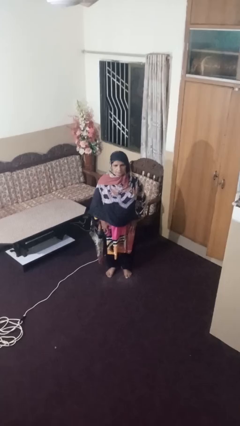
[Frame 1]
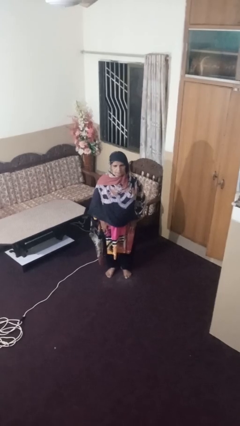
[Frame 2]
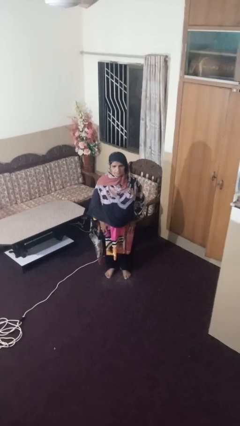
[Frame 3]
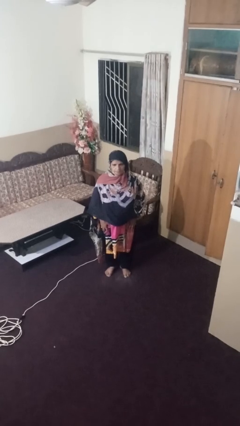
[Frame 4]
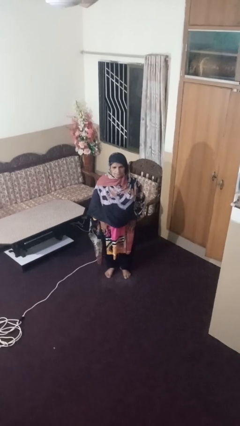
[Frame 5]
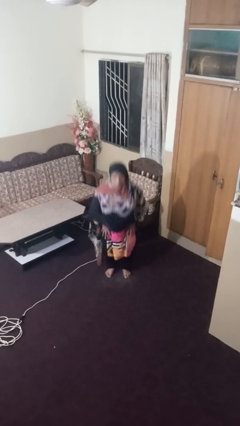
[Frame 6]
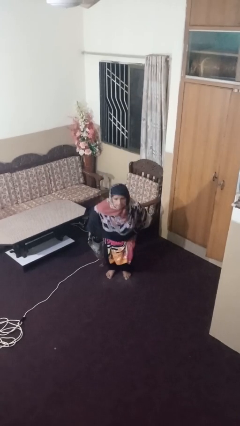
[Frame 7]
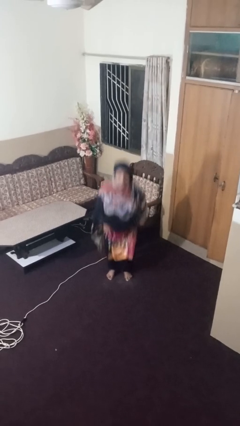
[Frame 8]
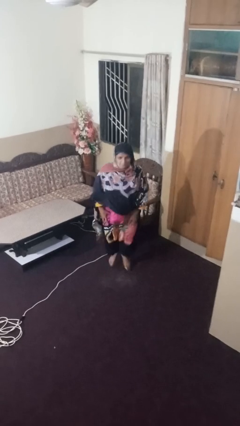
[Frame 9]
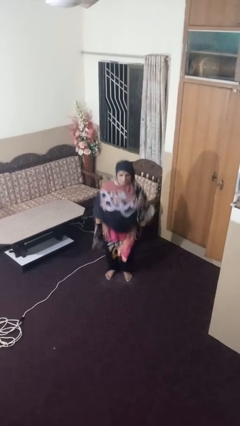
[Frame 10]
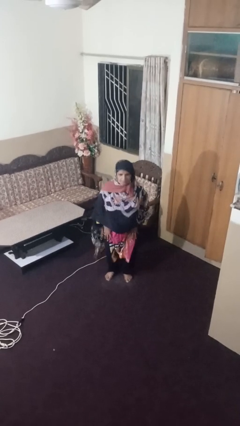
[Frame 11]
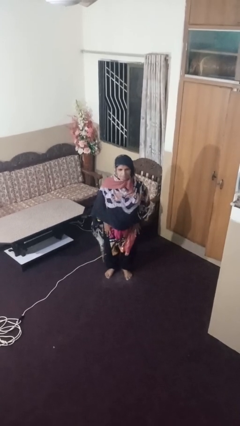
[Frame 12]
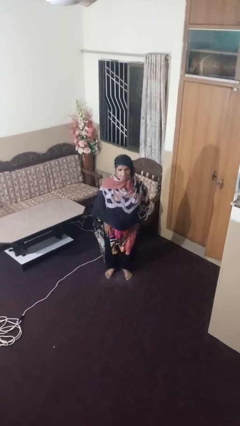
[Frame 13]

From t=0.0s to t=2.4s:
person jumps

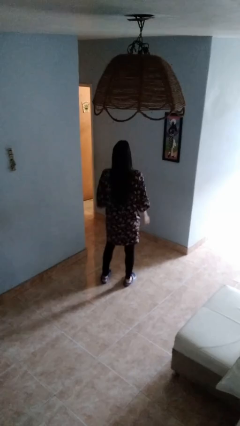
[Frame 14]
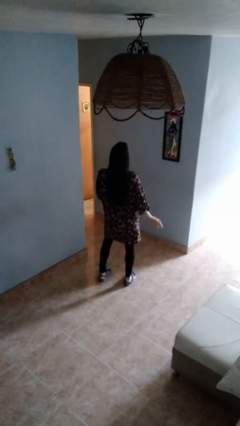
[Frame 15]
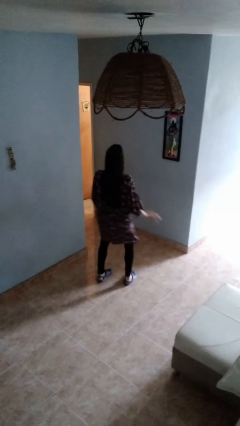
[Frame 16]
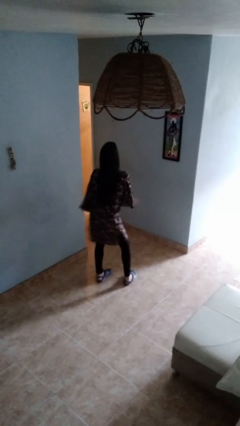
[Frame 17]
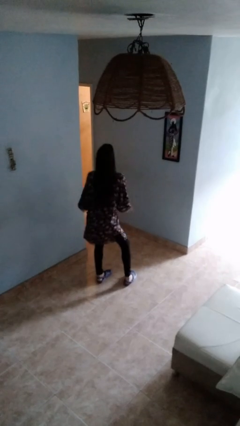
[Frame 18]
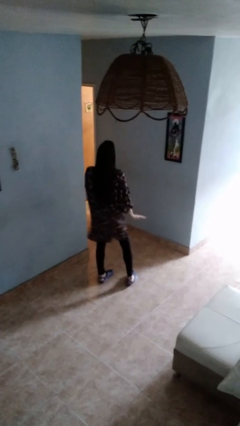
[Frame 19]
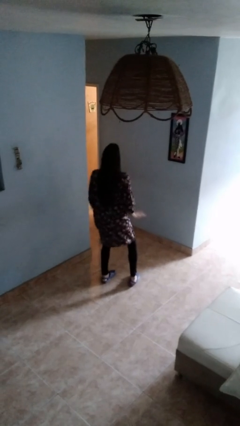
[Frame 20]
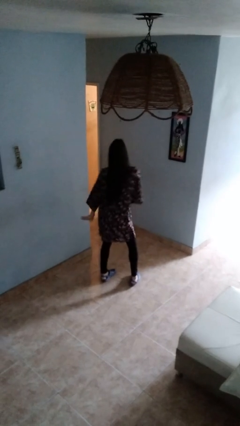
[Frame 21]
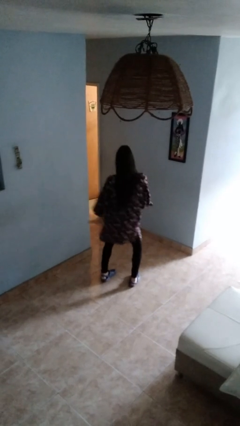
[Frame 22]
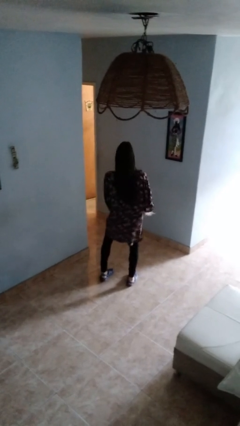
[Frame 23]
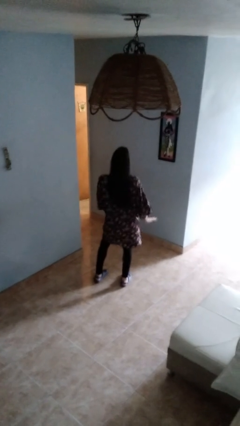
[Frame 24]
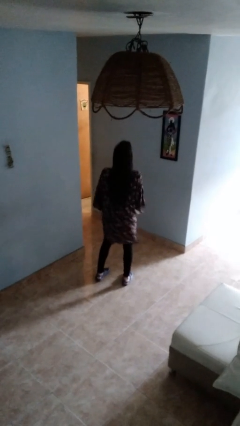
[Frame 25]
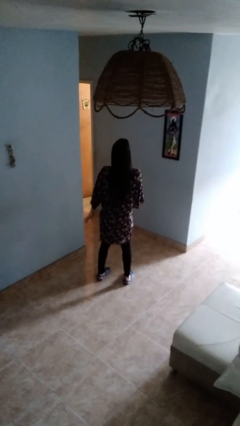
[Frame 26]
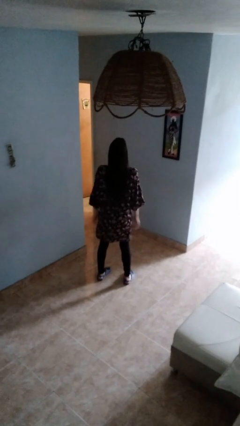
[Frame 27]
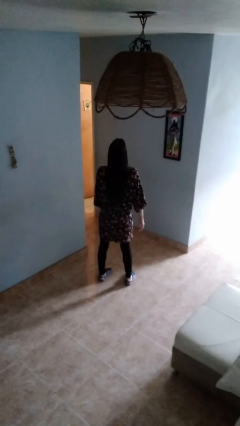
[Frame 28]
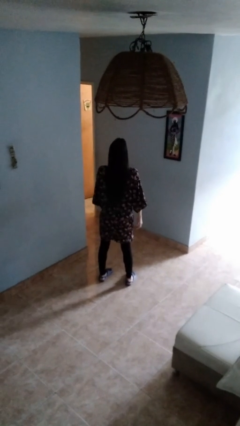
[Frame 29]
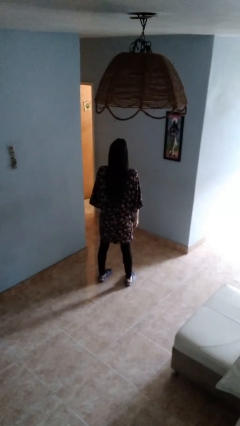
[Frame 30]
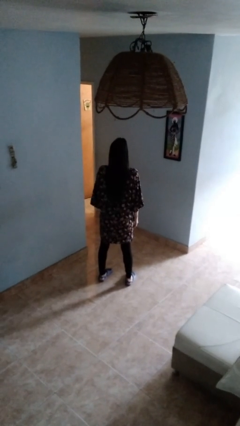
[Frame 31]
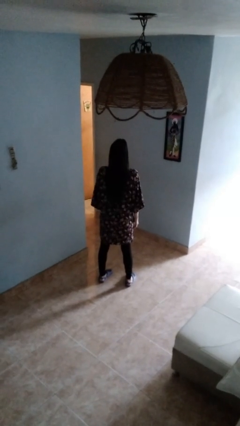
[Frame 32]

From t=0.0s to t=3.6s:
person dances in place

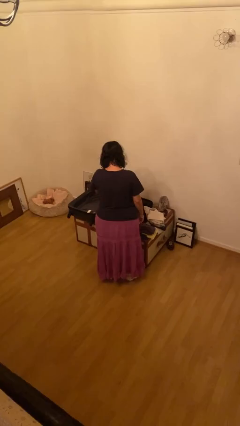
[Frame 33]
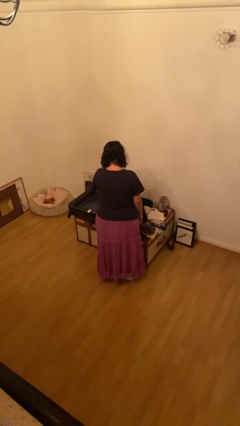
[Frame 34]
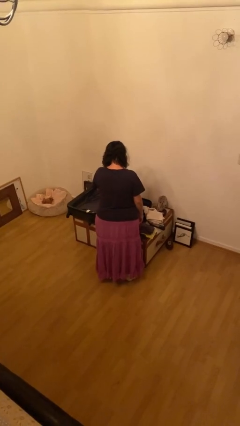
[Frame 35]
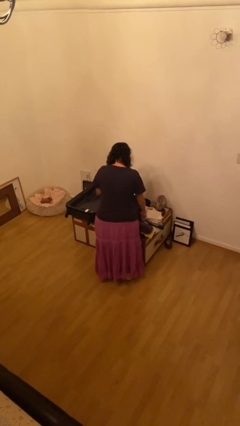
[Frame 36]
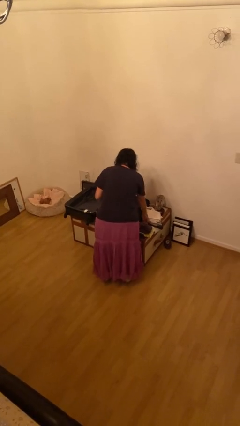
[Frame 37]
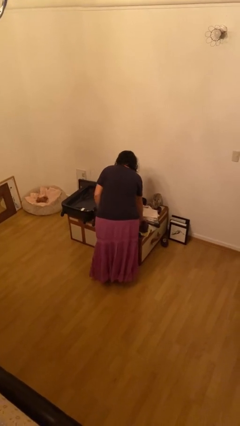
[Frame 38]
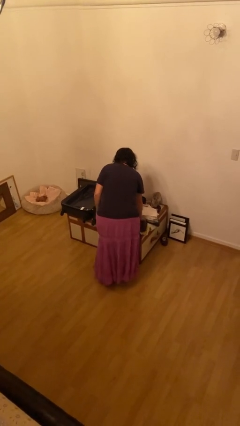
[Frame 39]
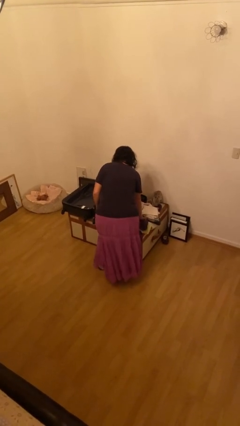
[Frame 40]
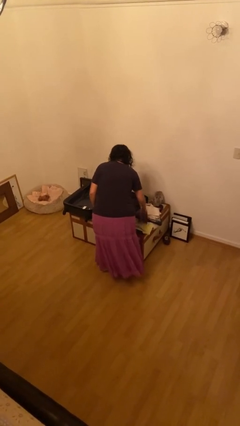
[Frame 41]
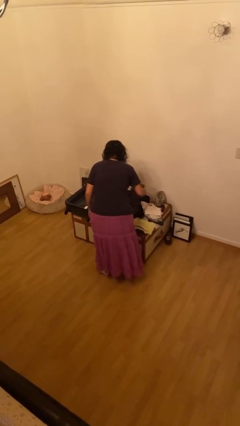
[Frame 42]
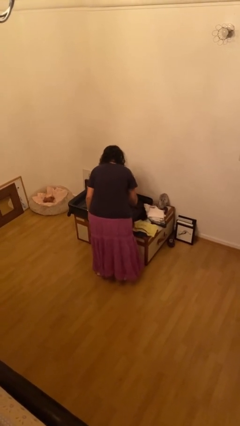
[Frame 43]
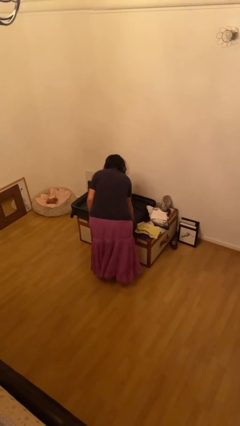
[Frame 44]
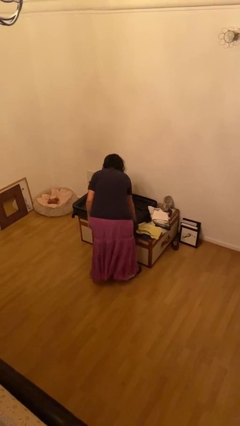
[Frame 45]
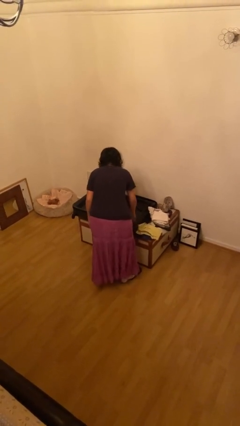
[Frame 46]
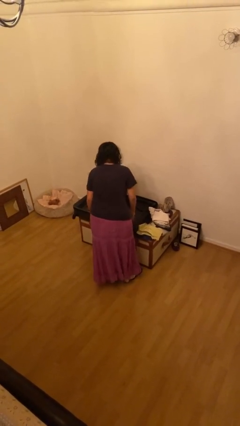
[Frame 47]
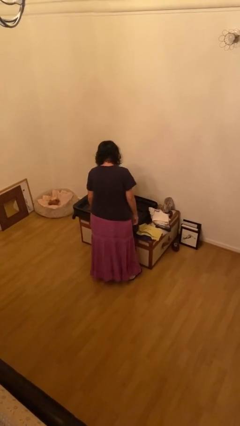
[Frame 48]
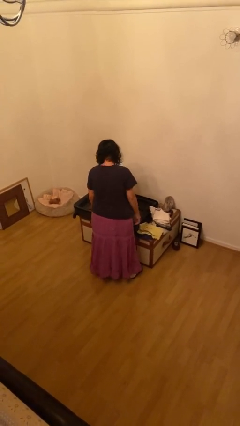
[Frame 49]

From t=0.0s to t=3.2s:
person unloads clothes from suitcase

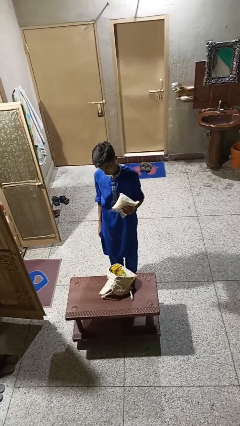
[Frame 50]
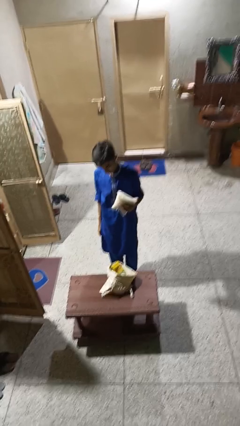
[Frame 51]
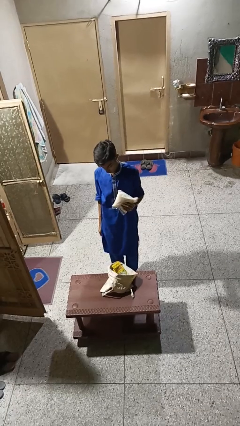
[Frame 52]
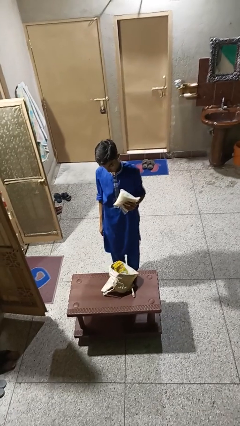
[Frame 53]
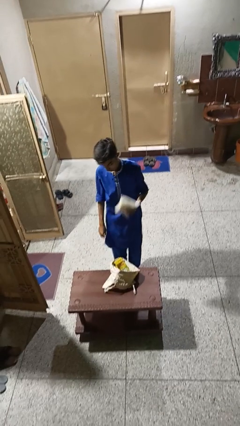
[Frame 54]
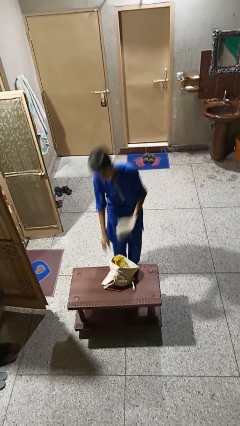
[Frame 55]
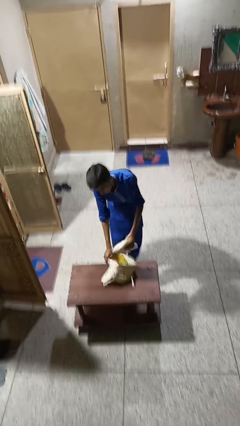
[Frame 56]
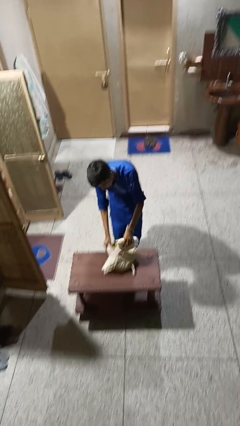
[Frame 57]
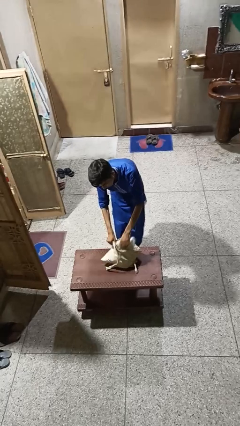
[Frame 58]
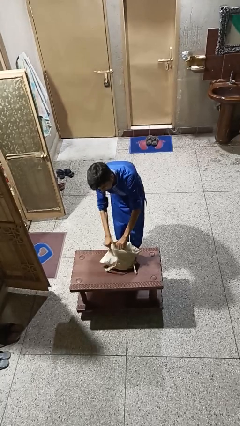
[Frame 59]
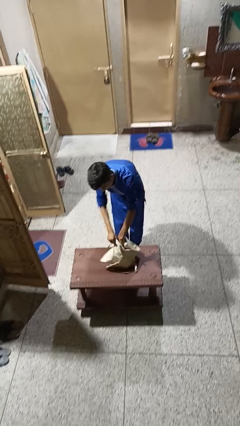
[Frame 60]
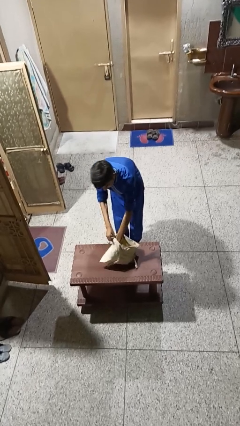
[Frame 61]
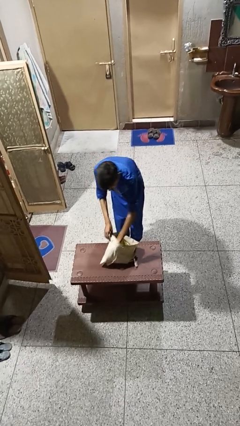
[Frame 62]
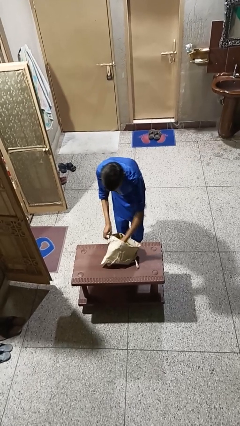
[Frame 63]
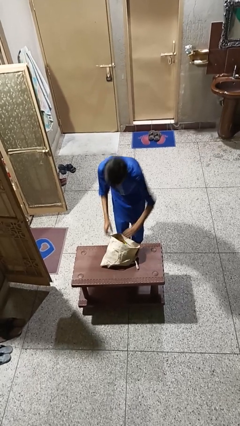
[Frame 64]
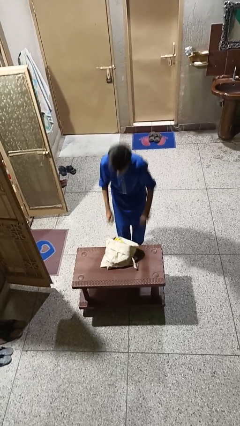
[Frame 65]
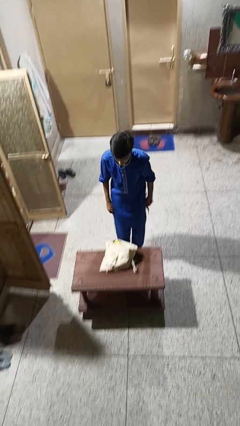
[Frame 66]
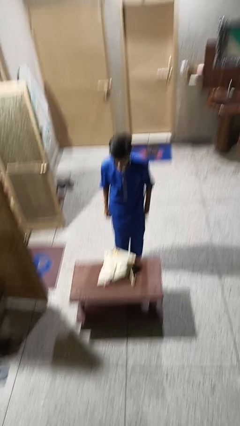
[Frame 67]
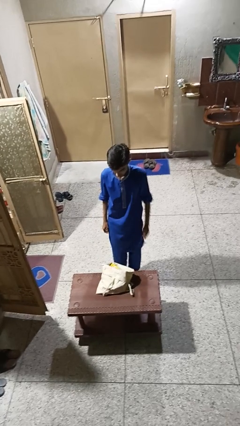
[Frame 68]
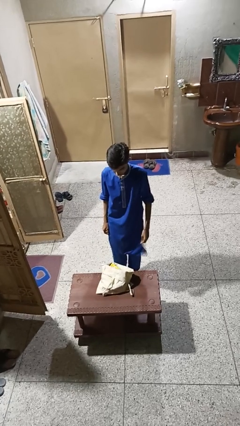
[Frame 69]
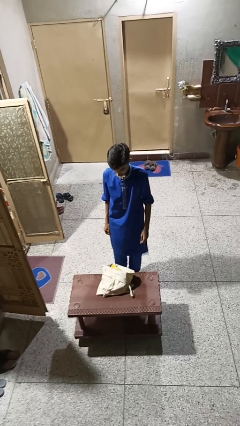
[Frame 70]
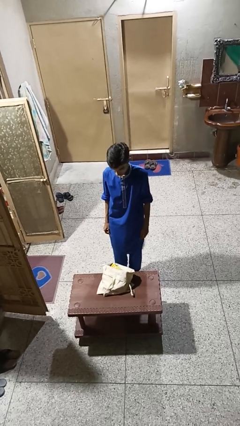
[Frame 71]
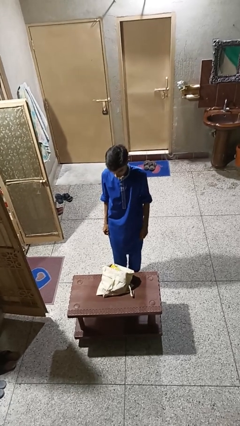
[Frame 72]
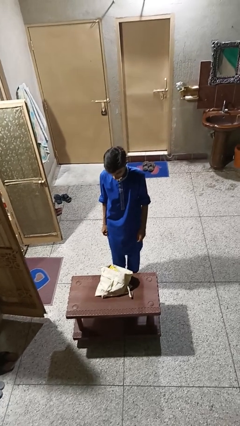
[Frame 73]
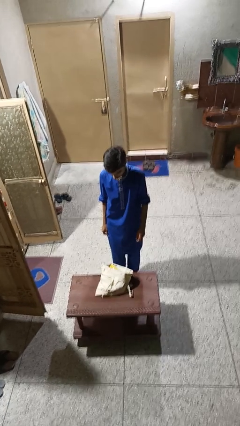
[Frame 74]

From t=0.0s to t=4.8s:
person puts object into bag

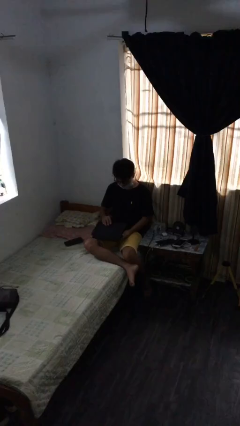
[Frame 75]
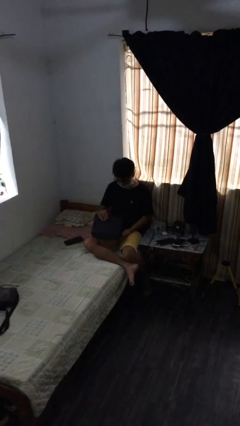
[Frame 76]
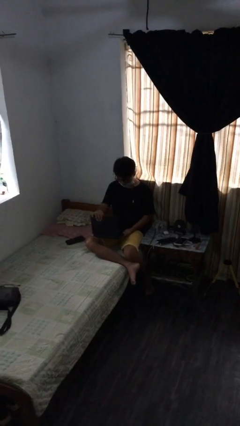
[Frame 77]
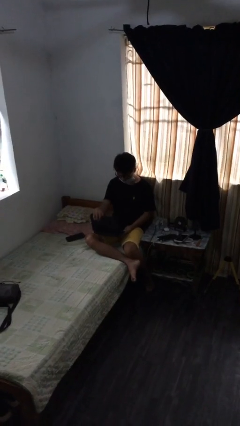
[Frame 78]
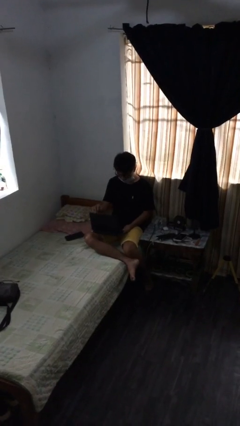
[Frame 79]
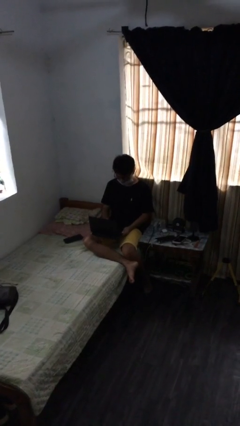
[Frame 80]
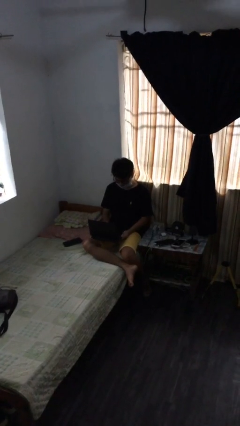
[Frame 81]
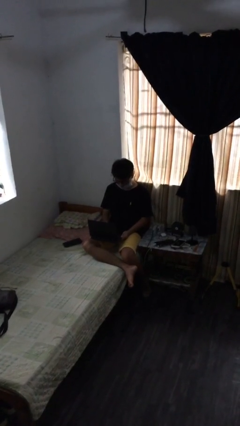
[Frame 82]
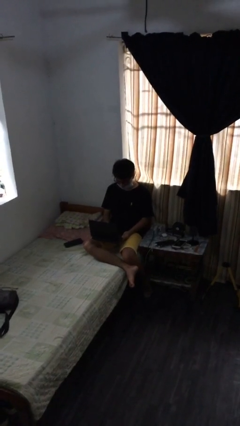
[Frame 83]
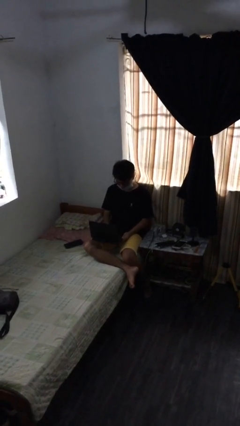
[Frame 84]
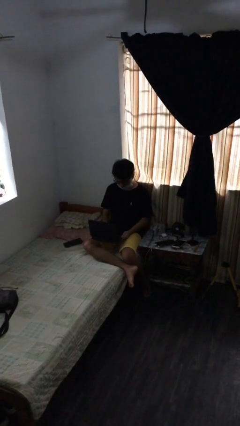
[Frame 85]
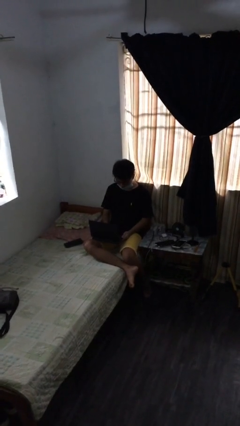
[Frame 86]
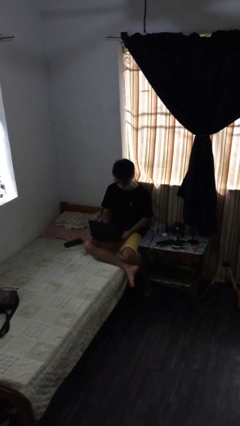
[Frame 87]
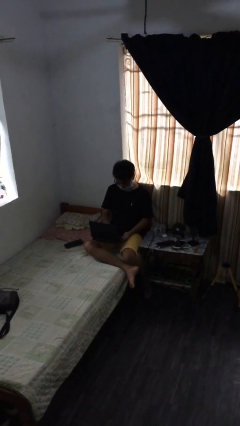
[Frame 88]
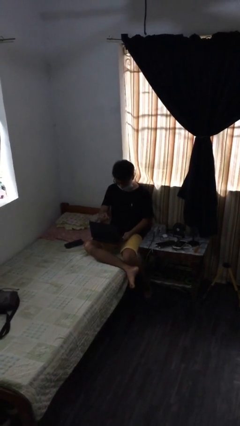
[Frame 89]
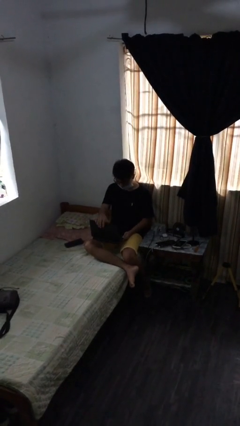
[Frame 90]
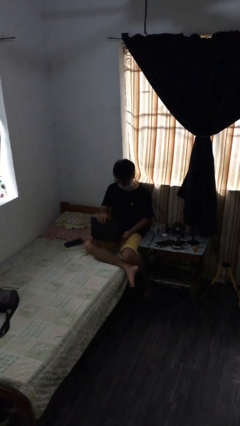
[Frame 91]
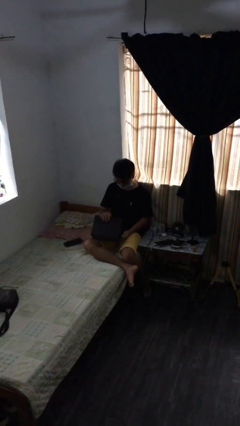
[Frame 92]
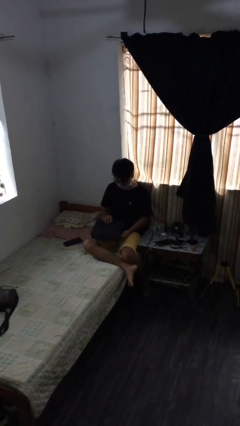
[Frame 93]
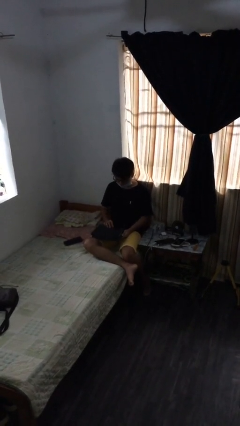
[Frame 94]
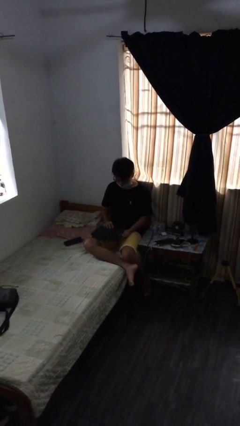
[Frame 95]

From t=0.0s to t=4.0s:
person interacts with laptop
